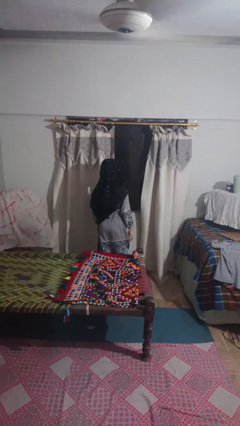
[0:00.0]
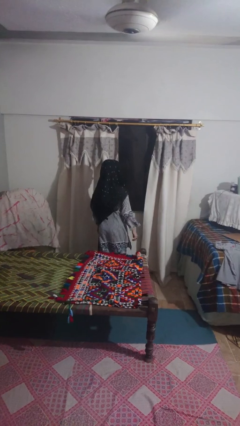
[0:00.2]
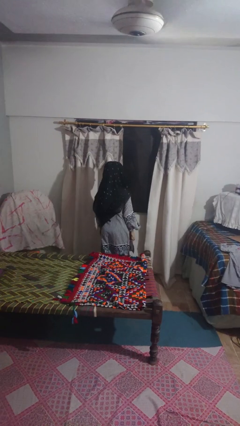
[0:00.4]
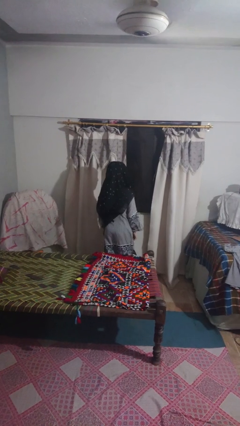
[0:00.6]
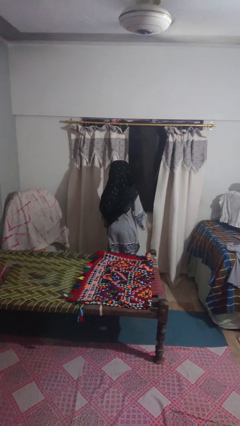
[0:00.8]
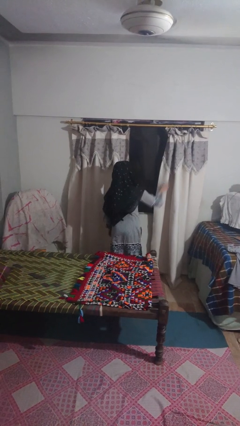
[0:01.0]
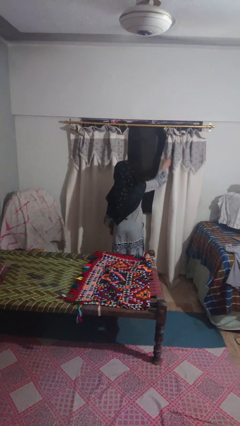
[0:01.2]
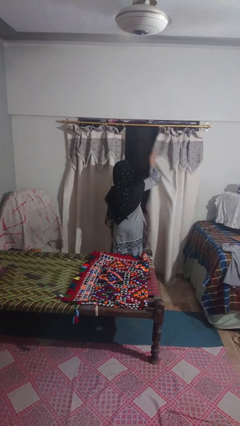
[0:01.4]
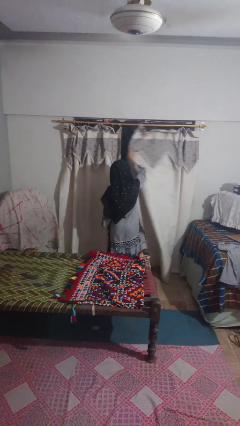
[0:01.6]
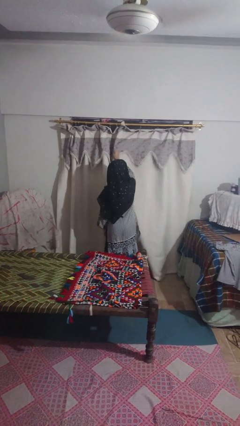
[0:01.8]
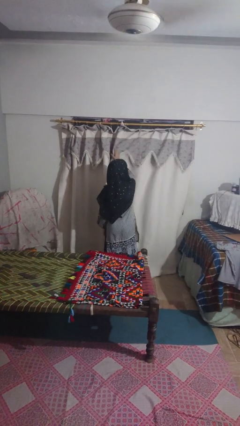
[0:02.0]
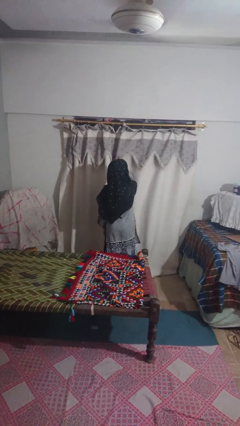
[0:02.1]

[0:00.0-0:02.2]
person closes curtains

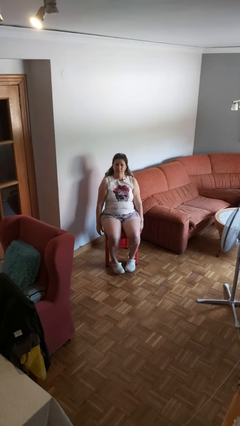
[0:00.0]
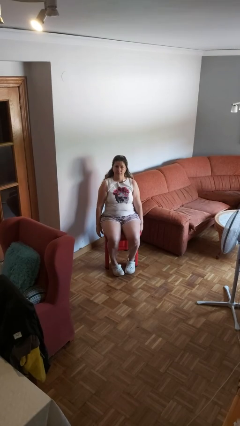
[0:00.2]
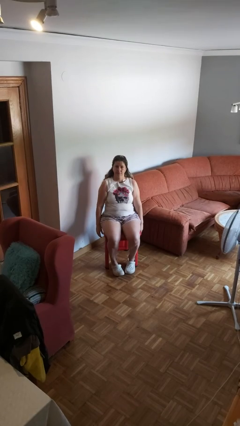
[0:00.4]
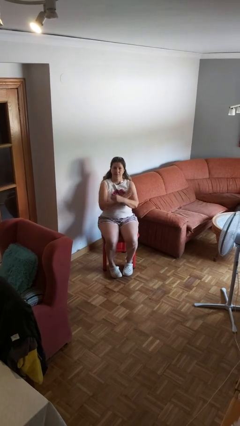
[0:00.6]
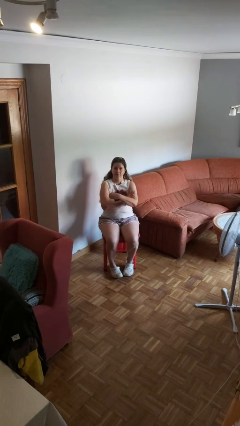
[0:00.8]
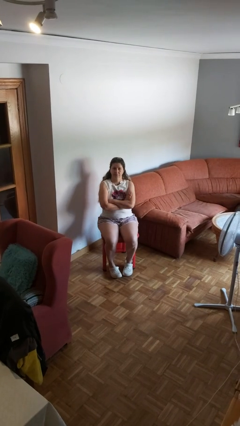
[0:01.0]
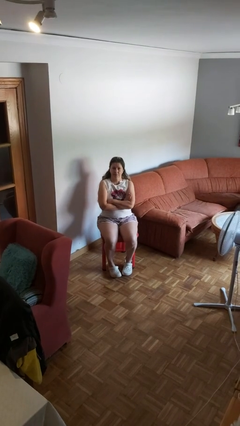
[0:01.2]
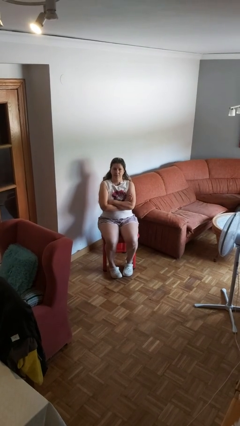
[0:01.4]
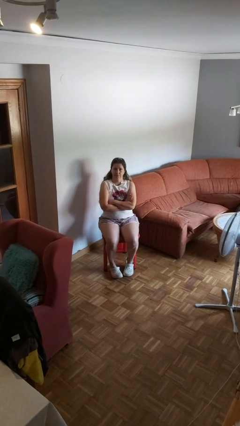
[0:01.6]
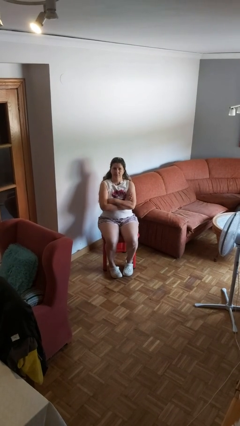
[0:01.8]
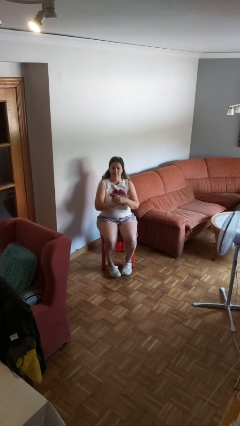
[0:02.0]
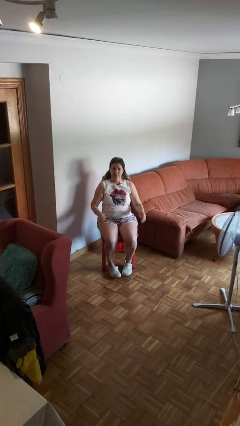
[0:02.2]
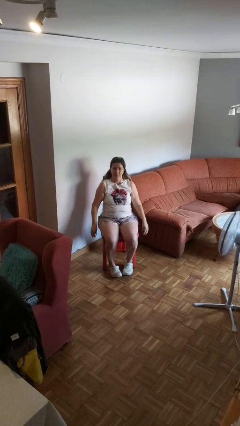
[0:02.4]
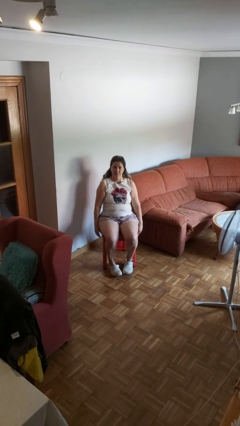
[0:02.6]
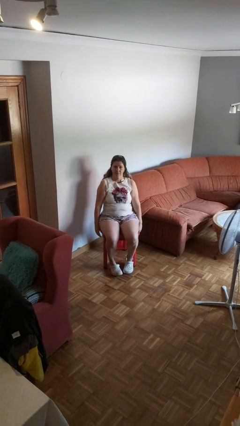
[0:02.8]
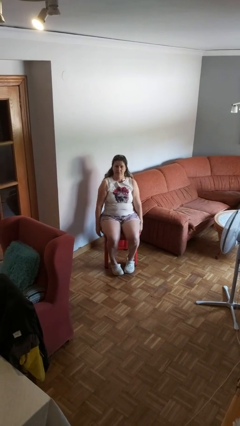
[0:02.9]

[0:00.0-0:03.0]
person crosses arms

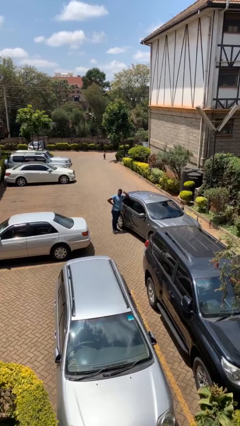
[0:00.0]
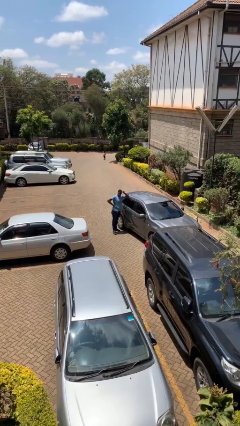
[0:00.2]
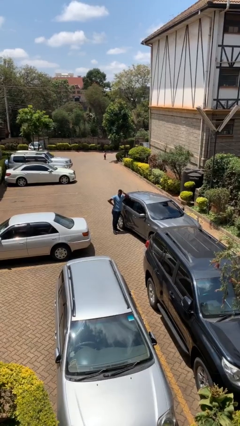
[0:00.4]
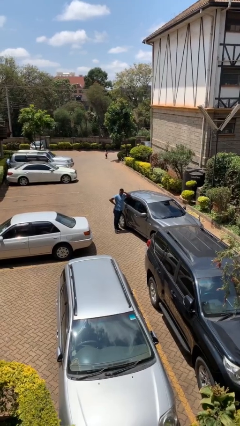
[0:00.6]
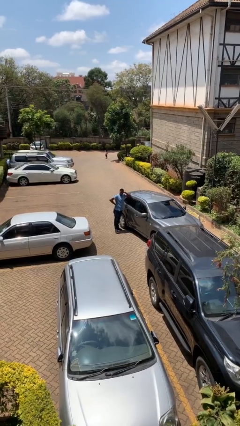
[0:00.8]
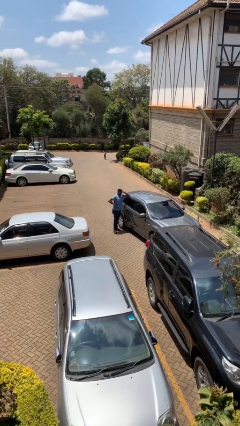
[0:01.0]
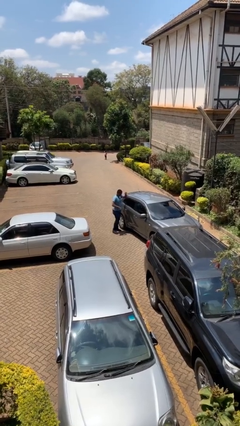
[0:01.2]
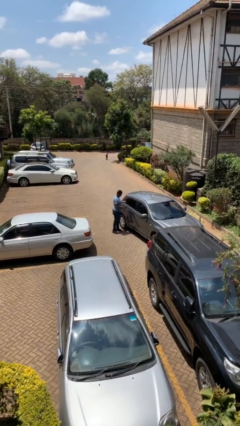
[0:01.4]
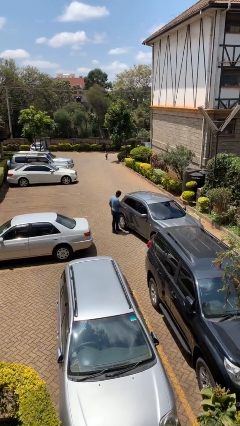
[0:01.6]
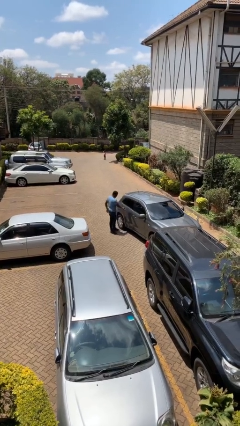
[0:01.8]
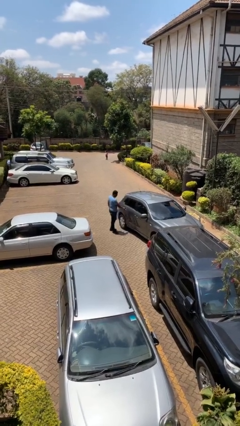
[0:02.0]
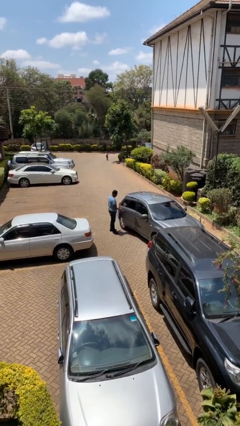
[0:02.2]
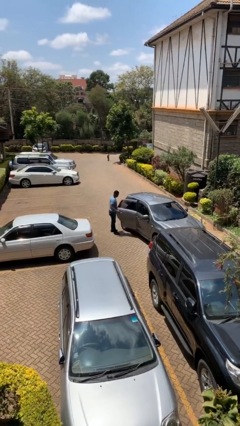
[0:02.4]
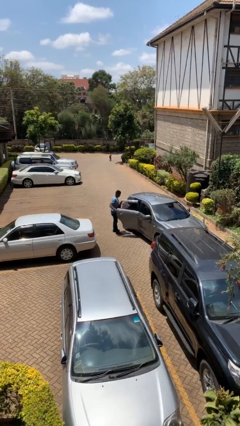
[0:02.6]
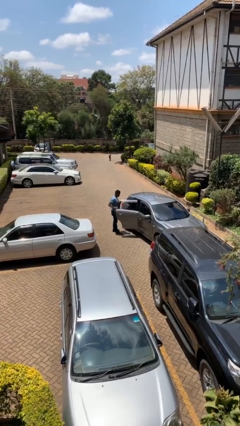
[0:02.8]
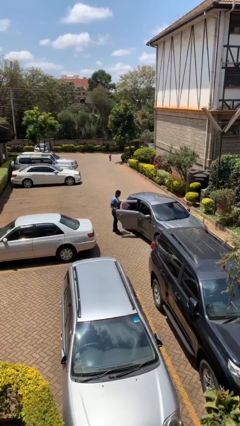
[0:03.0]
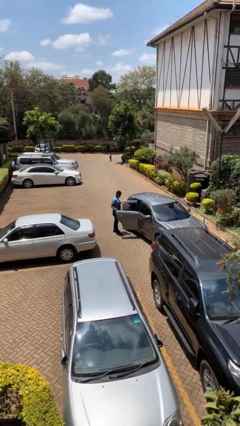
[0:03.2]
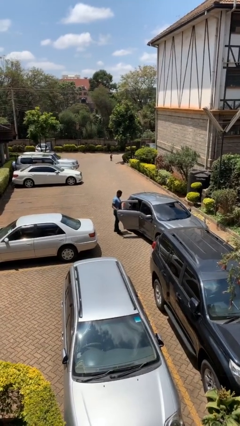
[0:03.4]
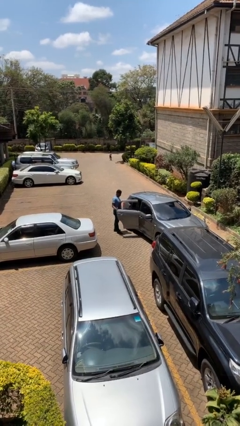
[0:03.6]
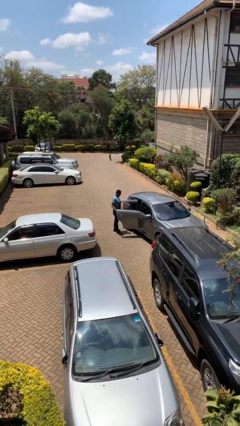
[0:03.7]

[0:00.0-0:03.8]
person opens car door

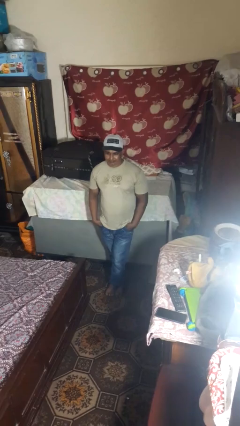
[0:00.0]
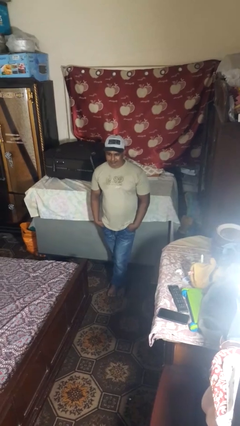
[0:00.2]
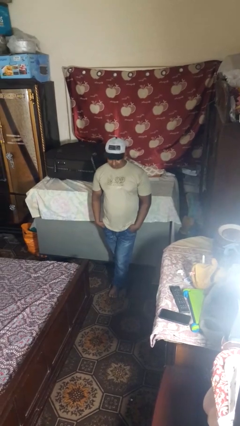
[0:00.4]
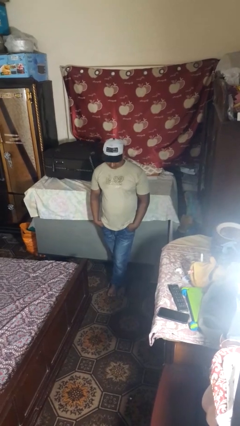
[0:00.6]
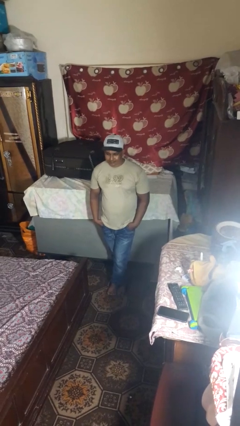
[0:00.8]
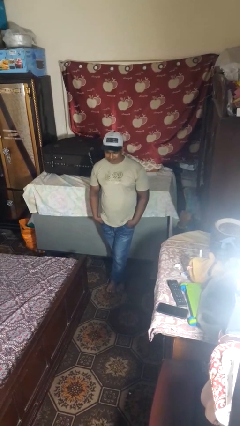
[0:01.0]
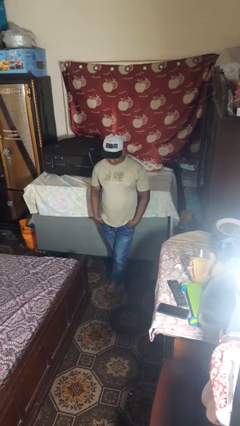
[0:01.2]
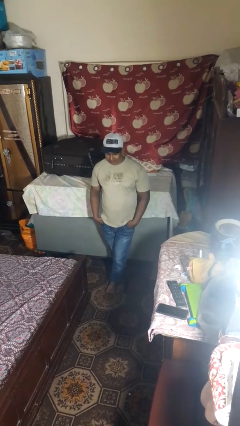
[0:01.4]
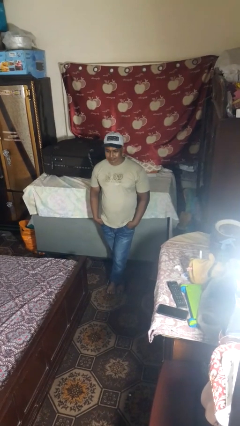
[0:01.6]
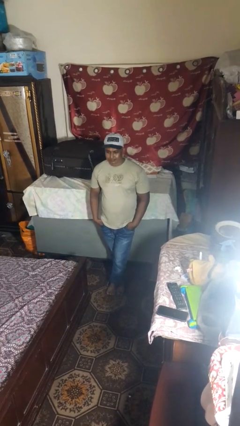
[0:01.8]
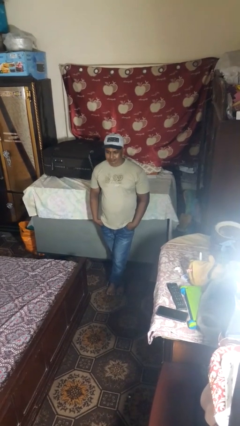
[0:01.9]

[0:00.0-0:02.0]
person nods head

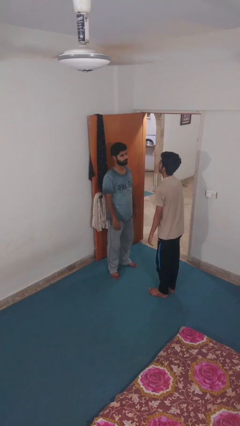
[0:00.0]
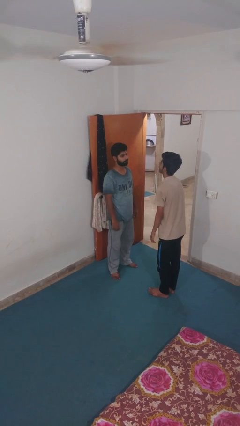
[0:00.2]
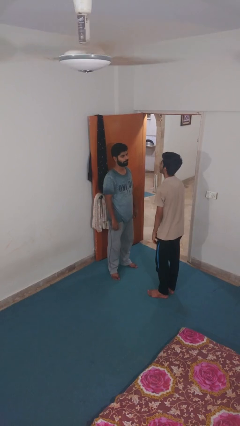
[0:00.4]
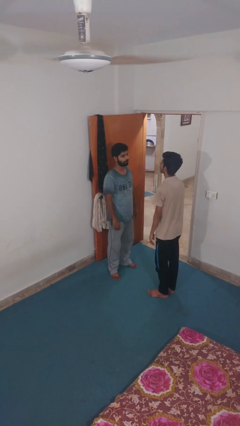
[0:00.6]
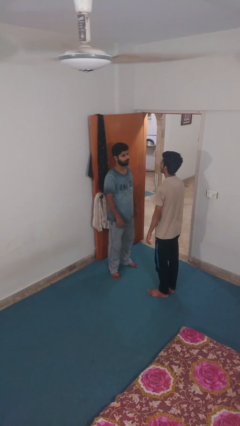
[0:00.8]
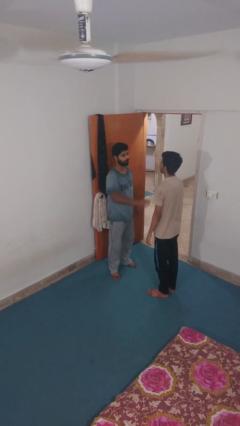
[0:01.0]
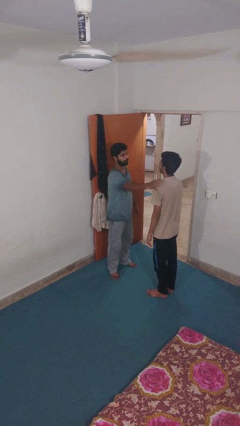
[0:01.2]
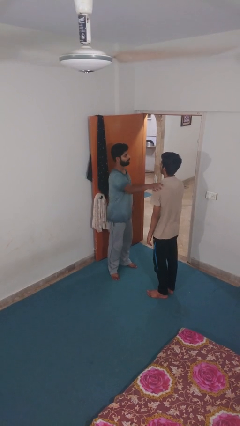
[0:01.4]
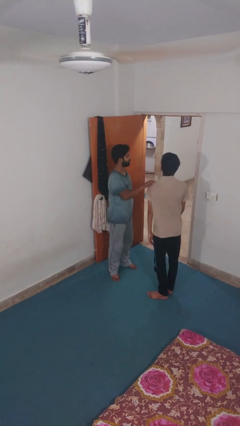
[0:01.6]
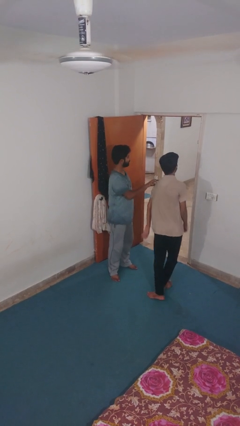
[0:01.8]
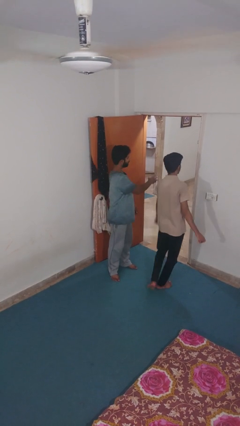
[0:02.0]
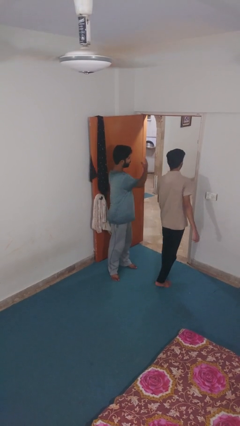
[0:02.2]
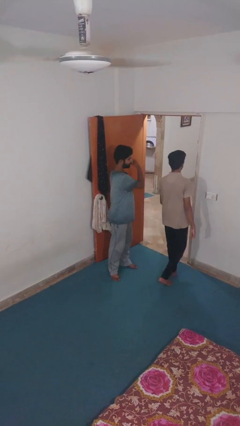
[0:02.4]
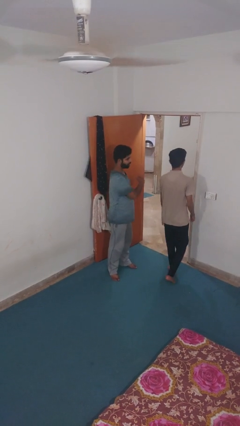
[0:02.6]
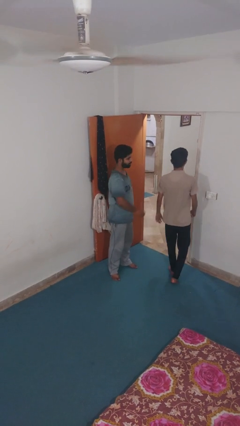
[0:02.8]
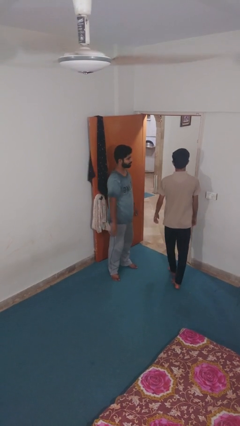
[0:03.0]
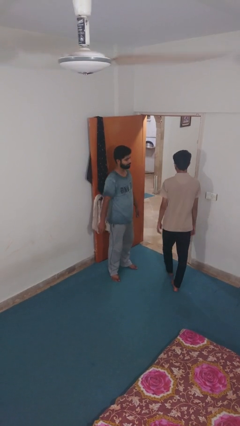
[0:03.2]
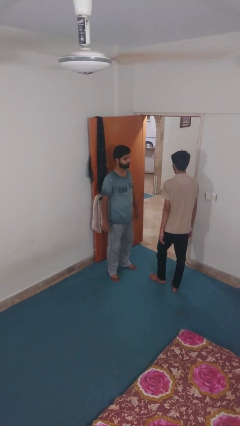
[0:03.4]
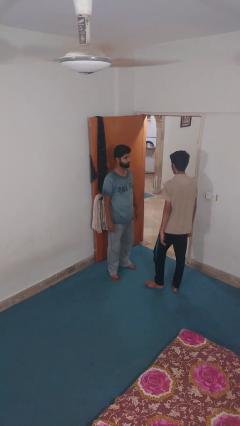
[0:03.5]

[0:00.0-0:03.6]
person shoves person

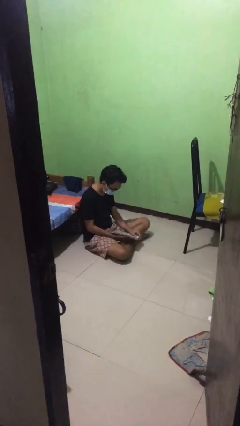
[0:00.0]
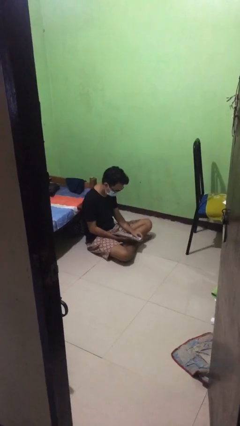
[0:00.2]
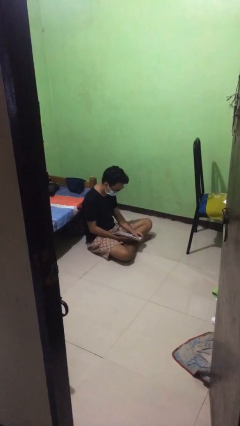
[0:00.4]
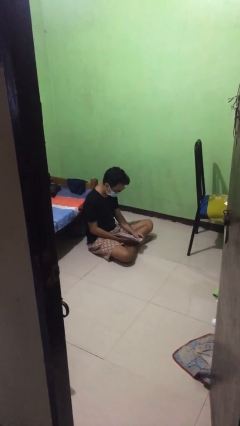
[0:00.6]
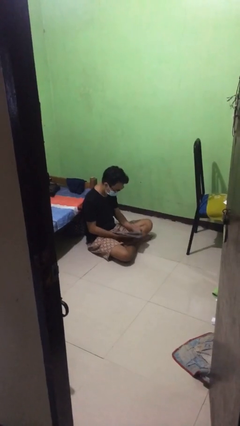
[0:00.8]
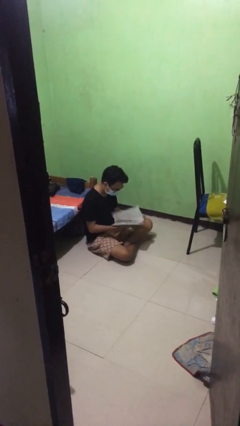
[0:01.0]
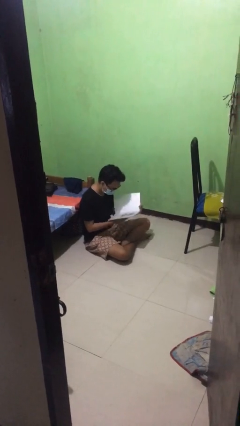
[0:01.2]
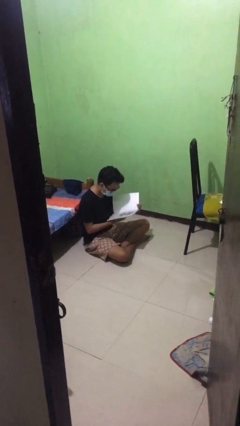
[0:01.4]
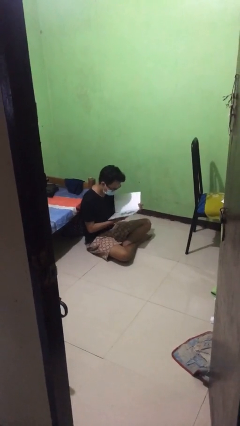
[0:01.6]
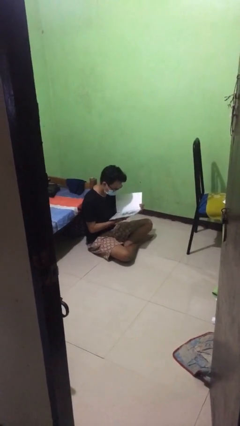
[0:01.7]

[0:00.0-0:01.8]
person reads document

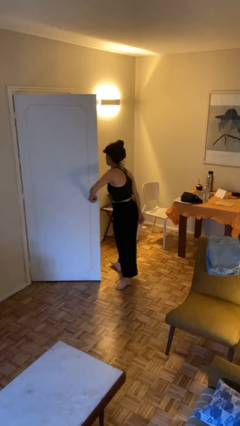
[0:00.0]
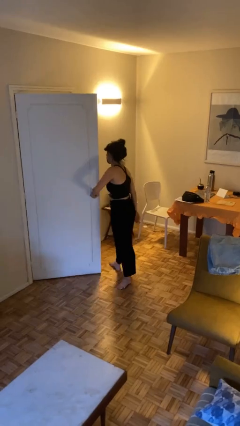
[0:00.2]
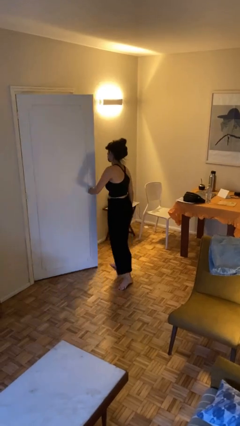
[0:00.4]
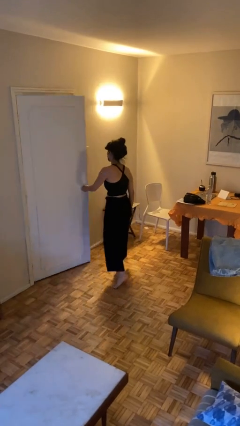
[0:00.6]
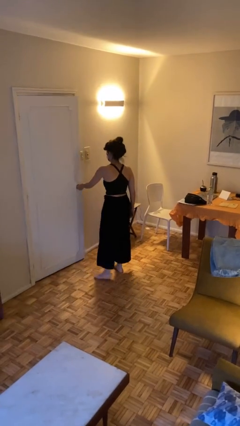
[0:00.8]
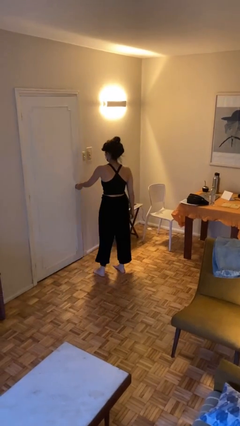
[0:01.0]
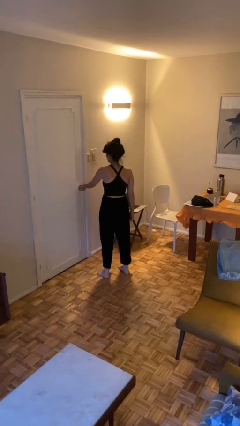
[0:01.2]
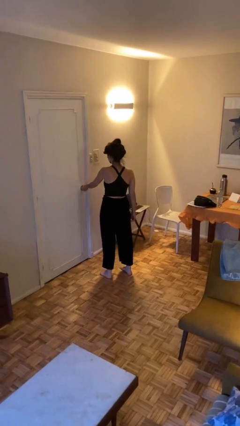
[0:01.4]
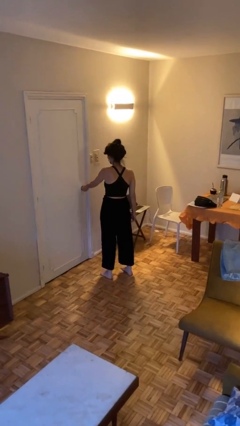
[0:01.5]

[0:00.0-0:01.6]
person closes facility door
